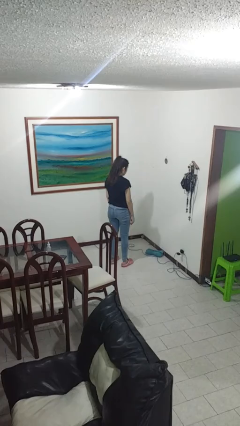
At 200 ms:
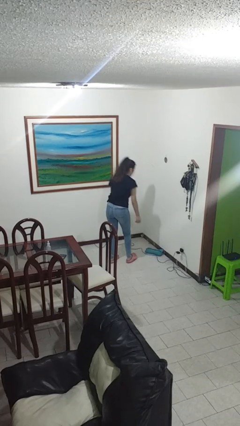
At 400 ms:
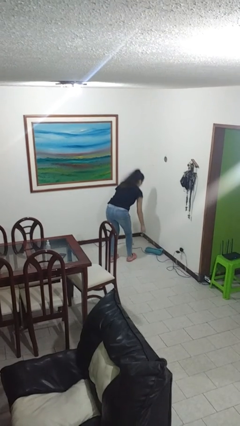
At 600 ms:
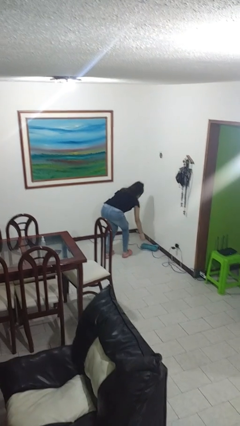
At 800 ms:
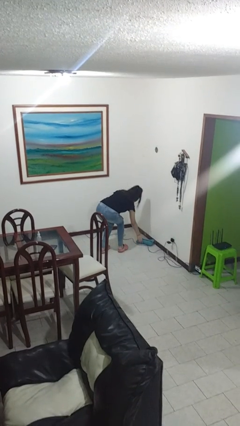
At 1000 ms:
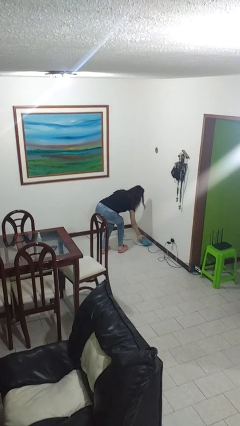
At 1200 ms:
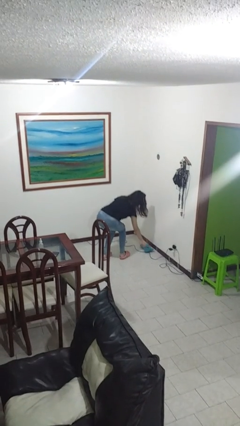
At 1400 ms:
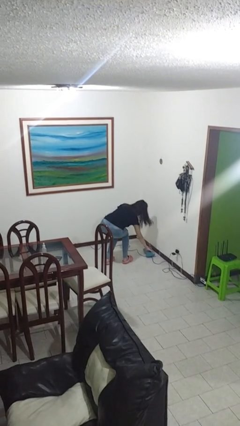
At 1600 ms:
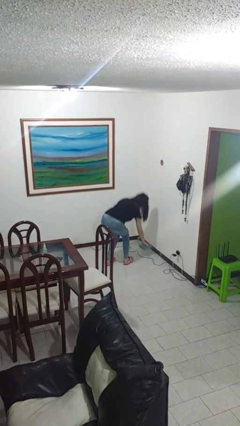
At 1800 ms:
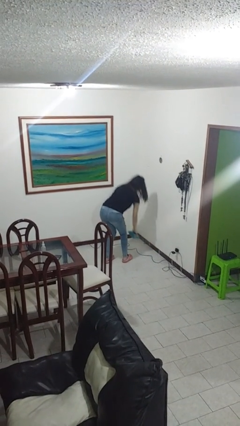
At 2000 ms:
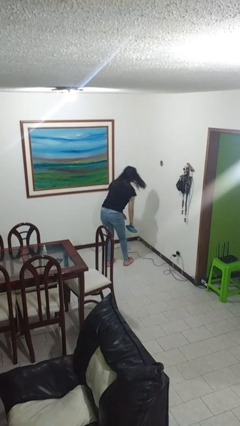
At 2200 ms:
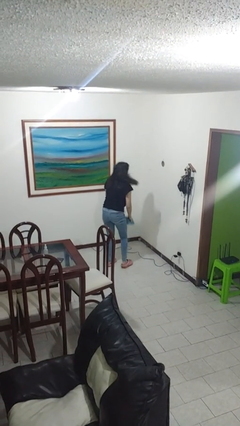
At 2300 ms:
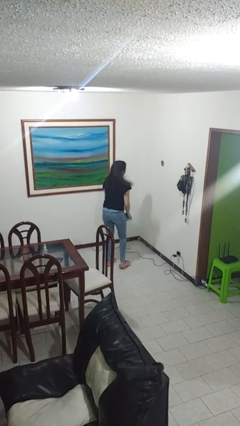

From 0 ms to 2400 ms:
person picks up object from floor

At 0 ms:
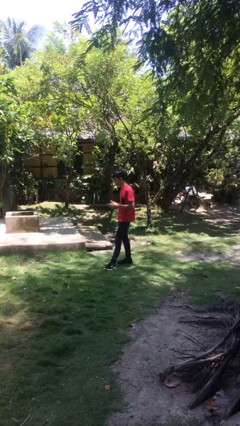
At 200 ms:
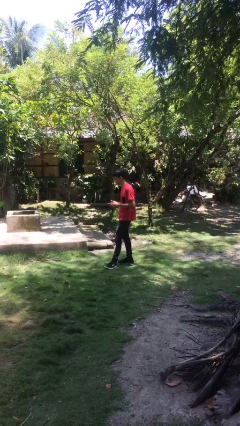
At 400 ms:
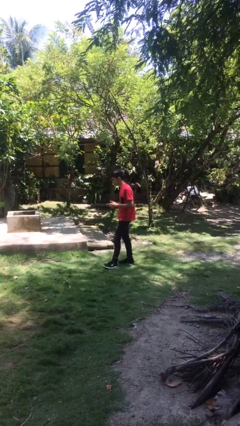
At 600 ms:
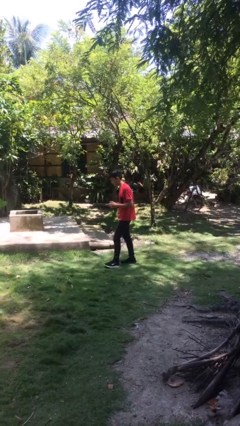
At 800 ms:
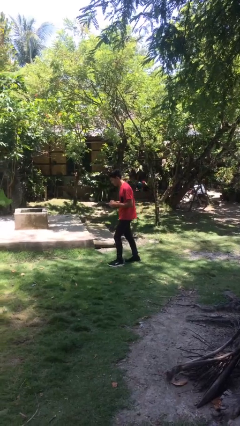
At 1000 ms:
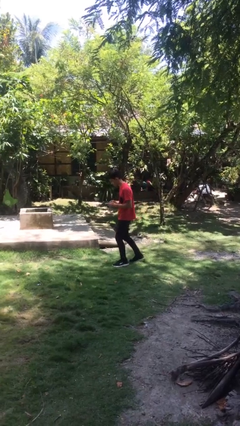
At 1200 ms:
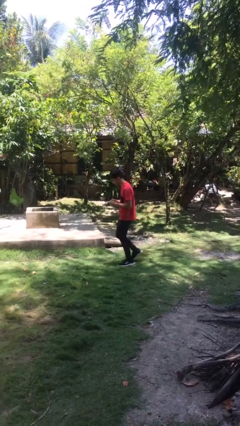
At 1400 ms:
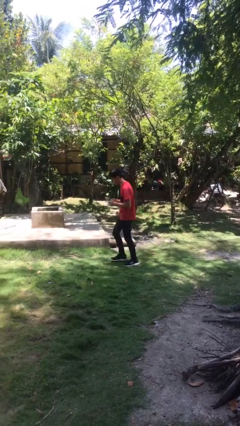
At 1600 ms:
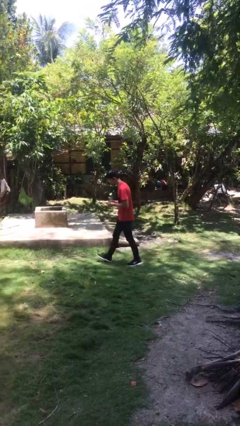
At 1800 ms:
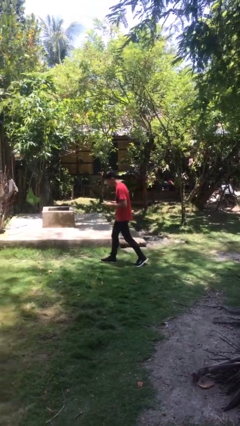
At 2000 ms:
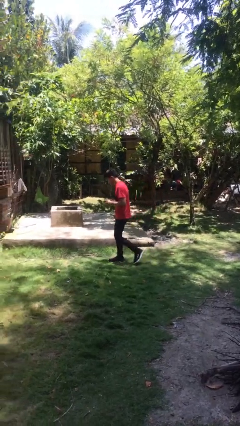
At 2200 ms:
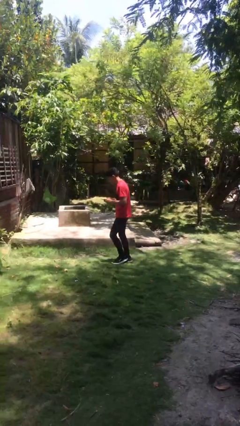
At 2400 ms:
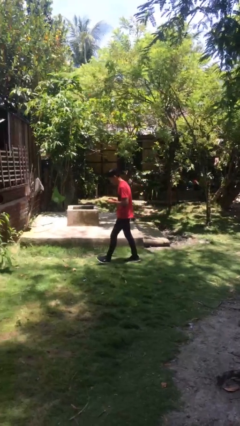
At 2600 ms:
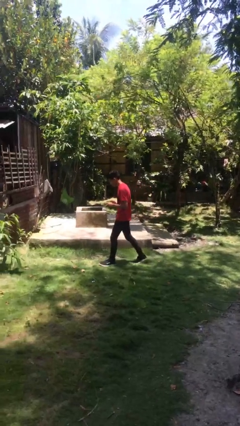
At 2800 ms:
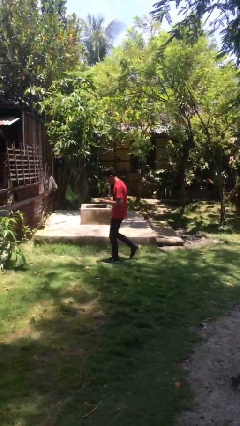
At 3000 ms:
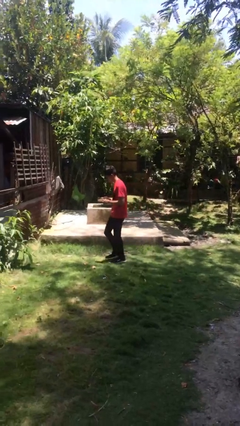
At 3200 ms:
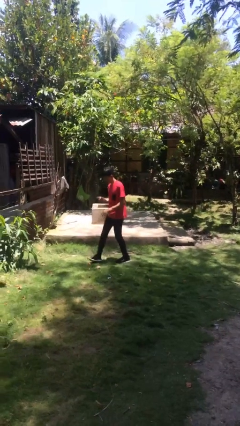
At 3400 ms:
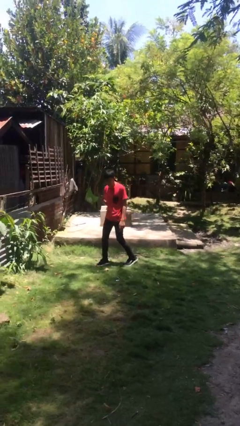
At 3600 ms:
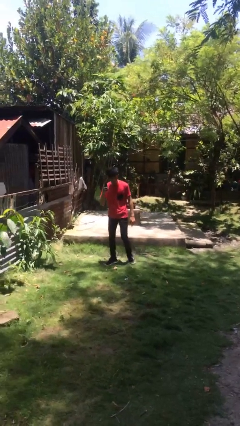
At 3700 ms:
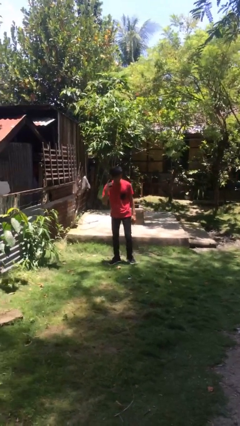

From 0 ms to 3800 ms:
person texts on phone

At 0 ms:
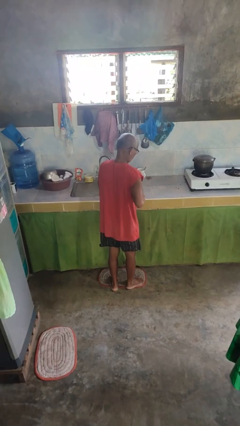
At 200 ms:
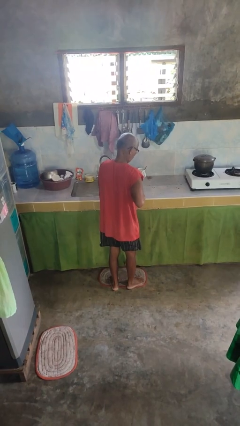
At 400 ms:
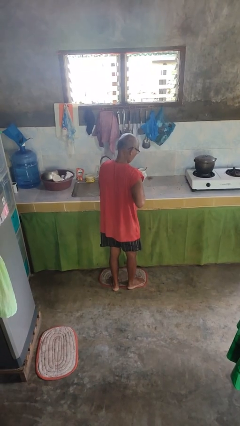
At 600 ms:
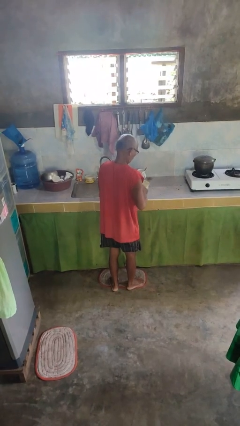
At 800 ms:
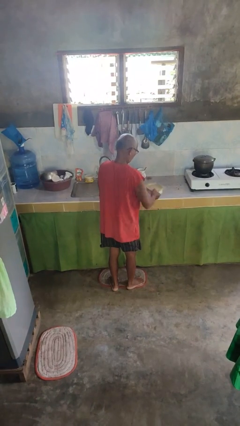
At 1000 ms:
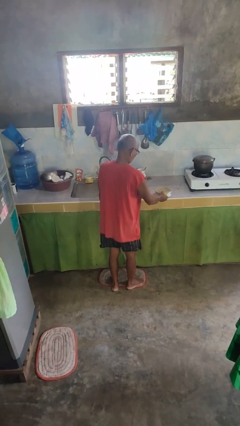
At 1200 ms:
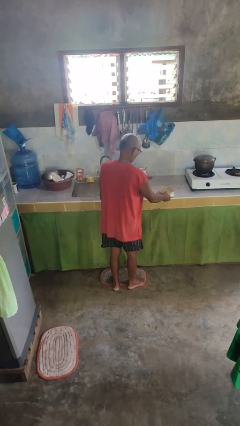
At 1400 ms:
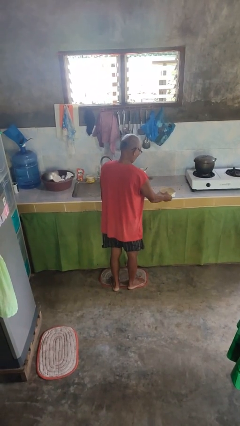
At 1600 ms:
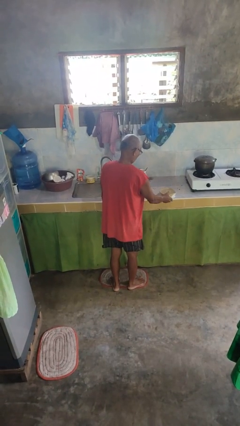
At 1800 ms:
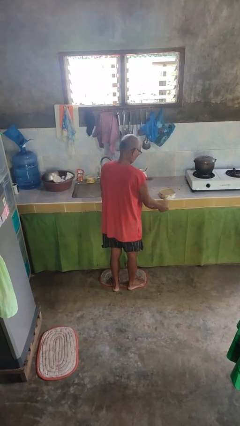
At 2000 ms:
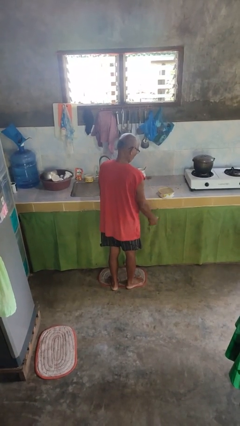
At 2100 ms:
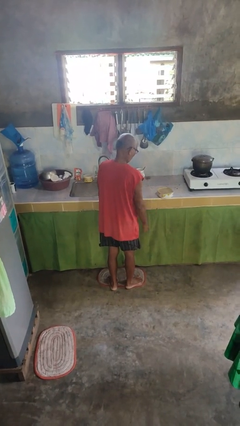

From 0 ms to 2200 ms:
person puts down object on countertop

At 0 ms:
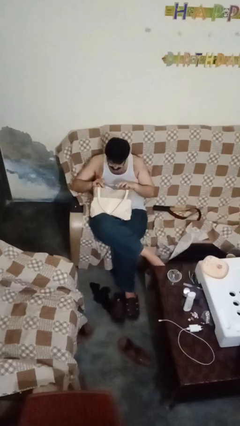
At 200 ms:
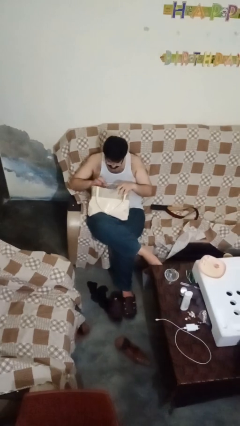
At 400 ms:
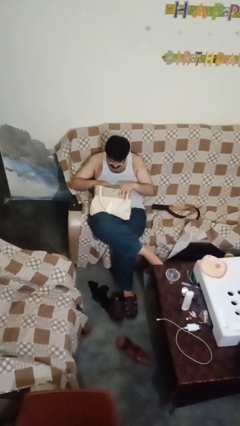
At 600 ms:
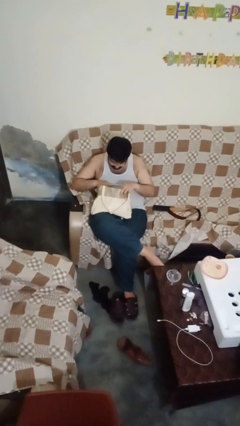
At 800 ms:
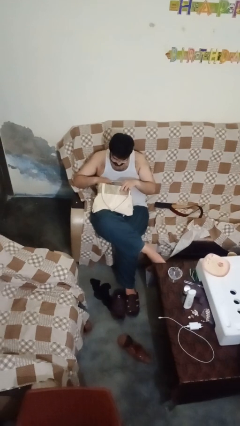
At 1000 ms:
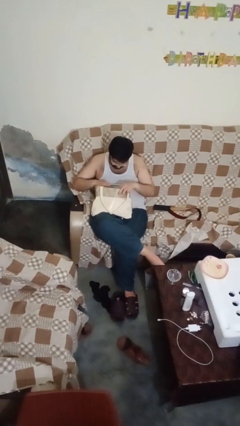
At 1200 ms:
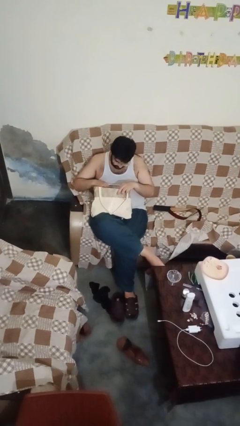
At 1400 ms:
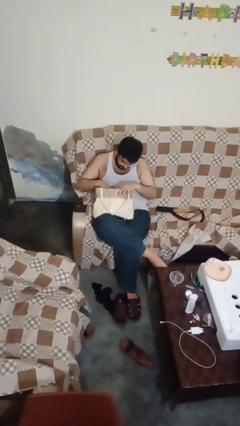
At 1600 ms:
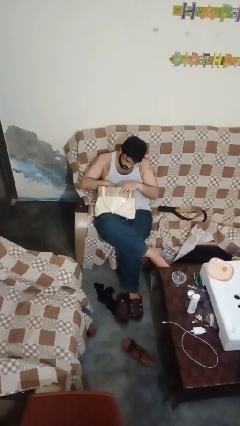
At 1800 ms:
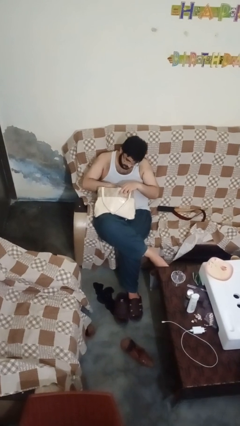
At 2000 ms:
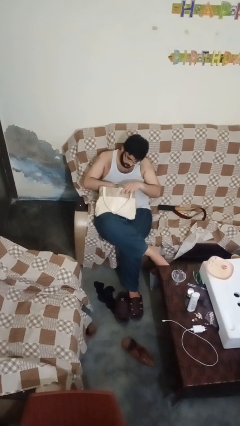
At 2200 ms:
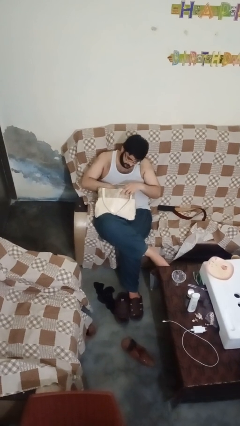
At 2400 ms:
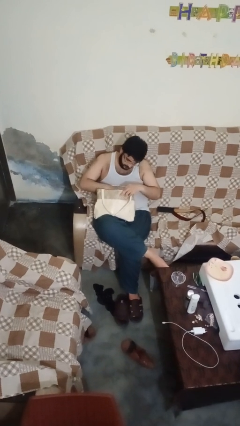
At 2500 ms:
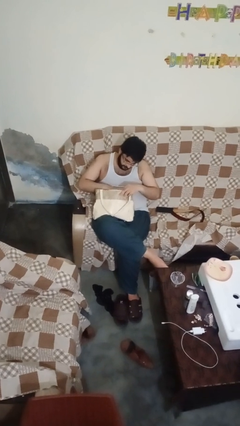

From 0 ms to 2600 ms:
person searches in purse

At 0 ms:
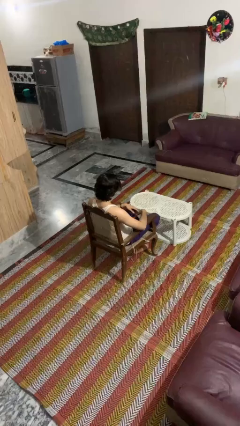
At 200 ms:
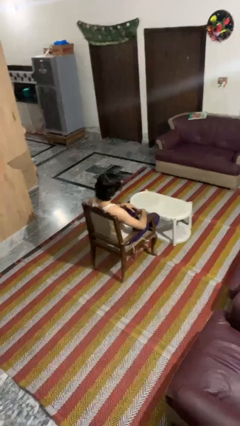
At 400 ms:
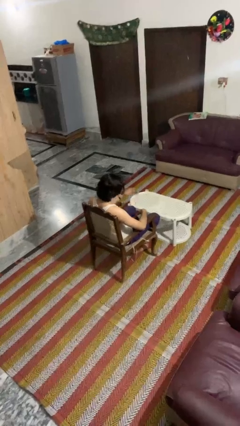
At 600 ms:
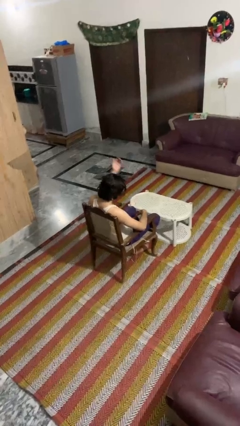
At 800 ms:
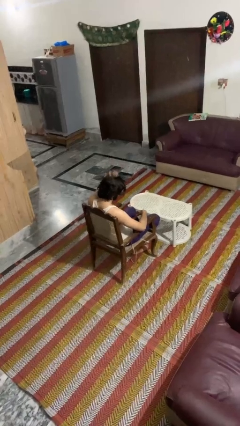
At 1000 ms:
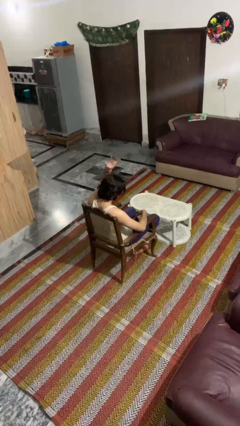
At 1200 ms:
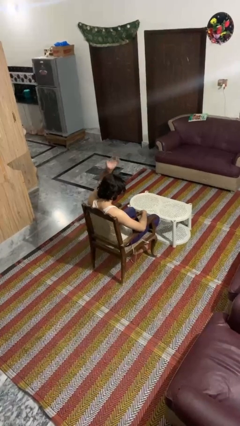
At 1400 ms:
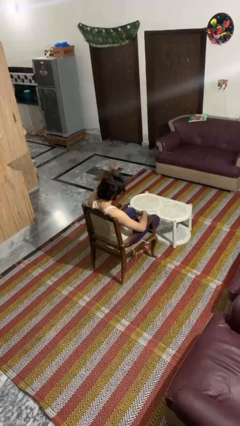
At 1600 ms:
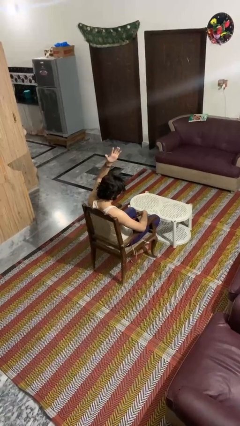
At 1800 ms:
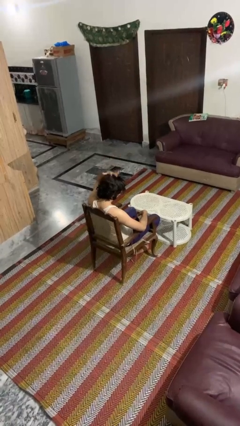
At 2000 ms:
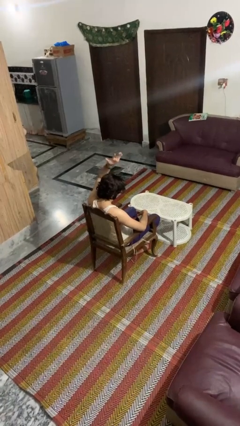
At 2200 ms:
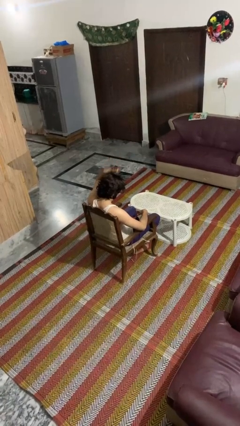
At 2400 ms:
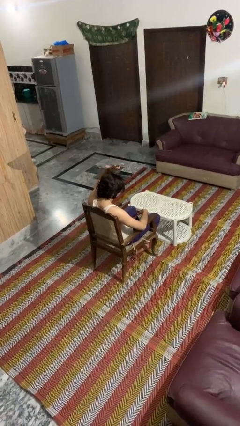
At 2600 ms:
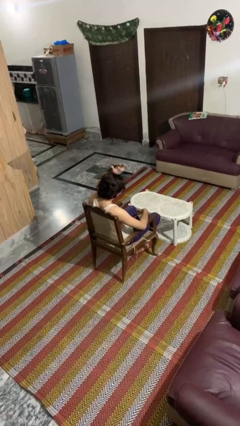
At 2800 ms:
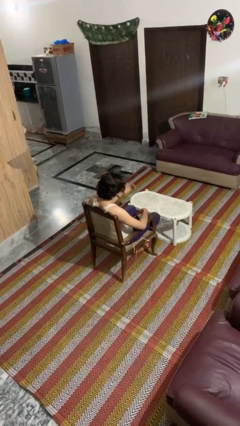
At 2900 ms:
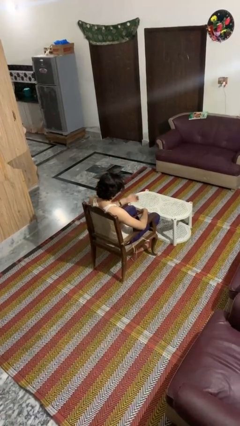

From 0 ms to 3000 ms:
person pats head

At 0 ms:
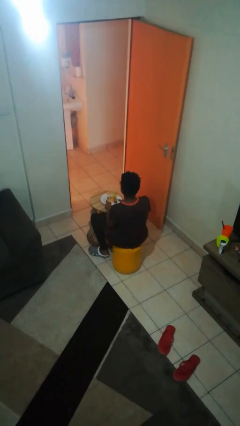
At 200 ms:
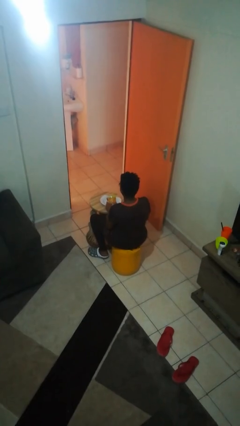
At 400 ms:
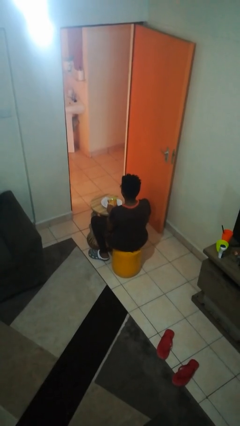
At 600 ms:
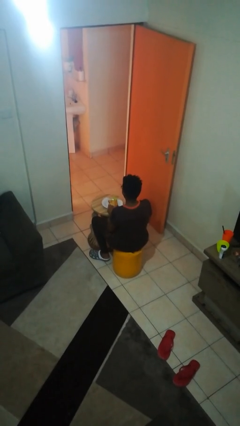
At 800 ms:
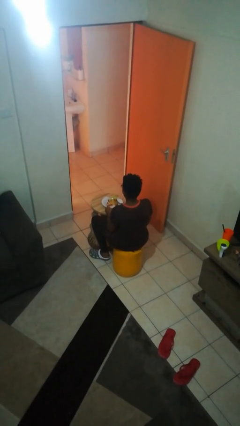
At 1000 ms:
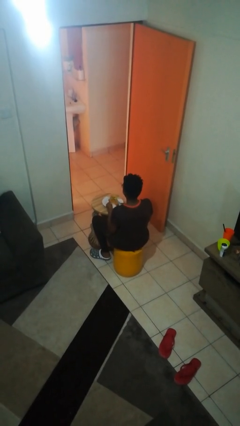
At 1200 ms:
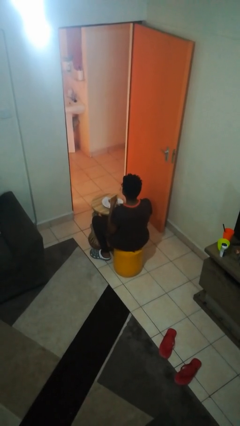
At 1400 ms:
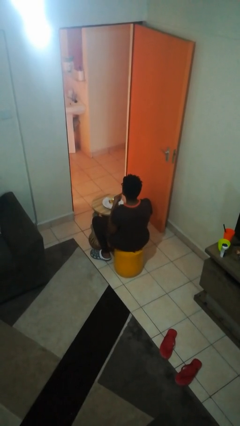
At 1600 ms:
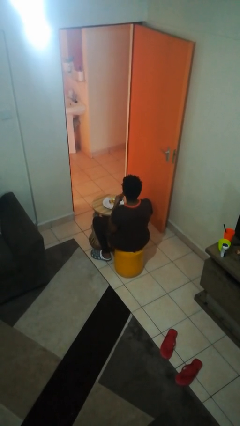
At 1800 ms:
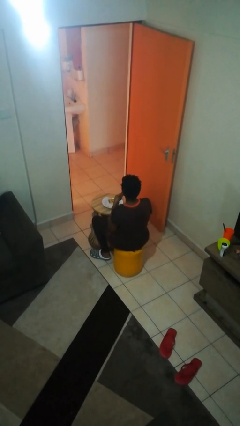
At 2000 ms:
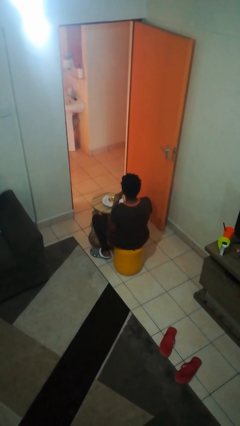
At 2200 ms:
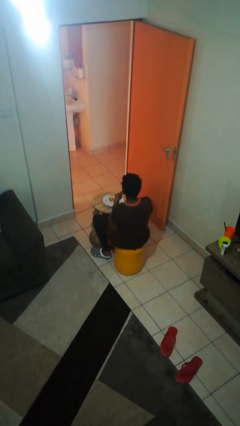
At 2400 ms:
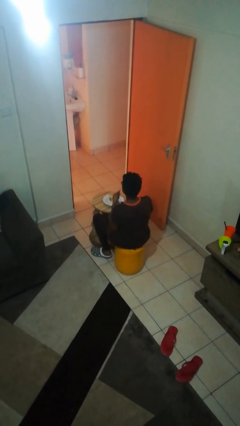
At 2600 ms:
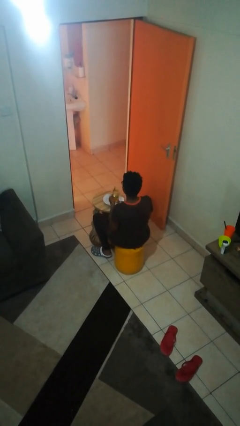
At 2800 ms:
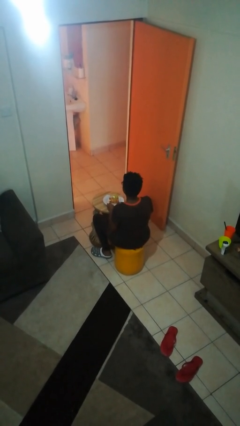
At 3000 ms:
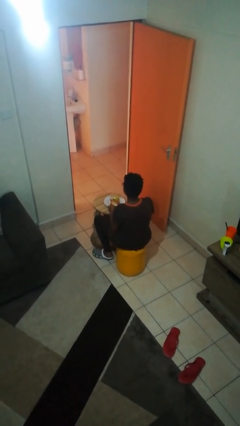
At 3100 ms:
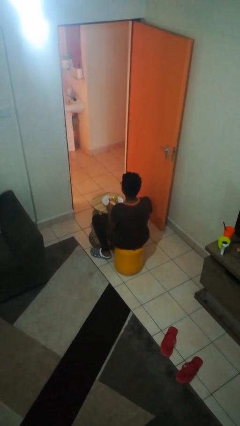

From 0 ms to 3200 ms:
person eats with utensil
